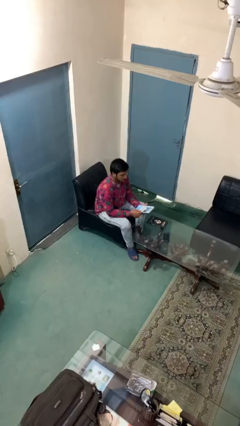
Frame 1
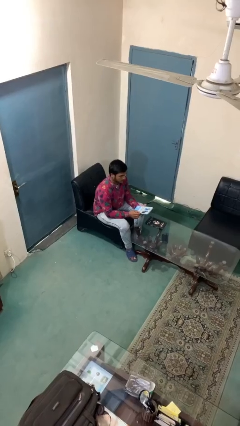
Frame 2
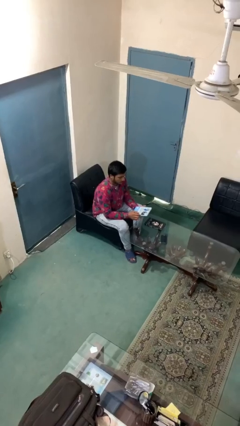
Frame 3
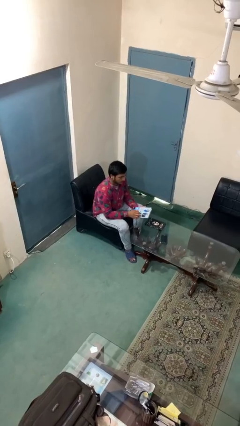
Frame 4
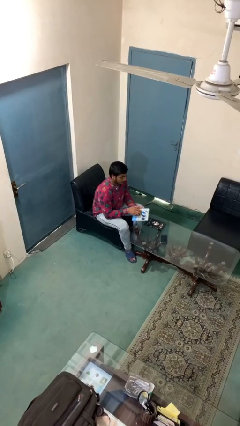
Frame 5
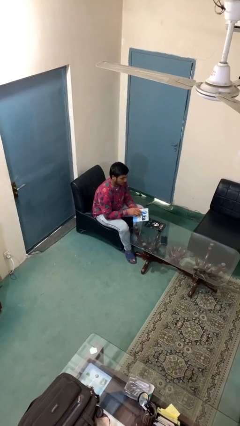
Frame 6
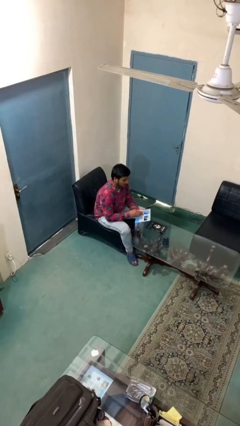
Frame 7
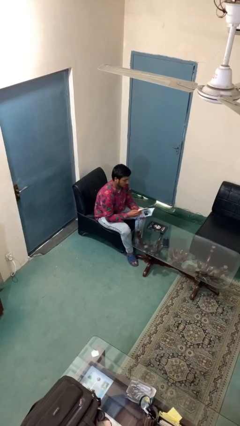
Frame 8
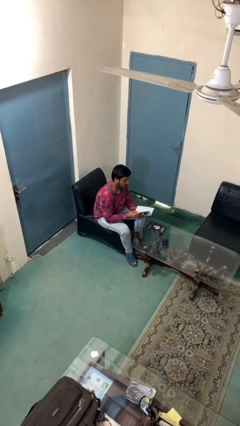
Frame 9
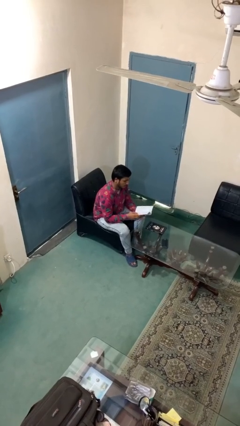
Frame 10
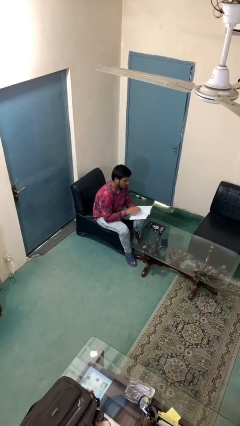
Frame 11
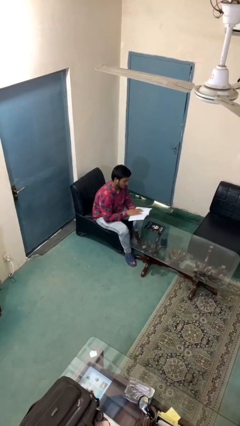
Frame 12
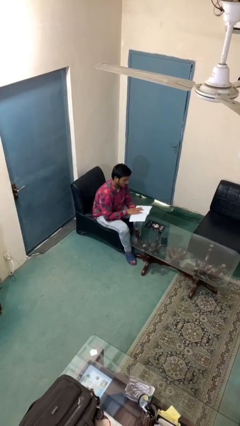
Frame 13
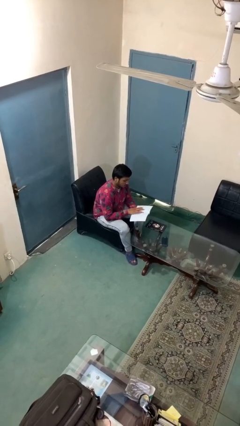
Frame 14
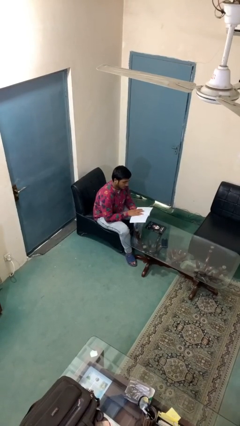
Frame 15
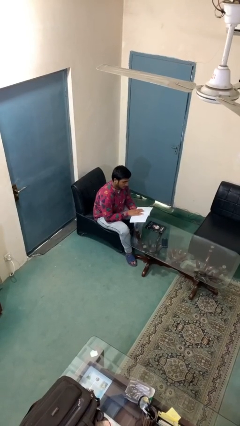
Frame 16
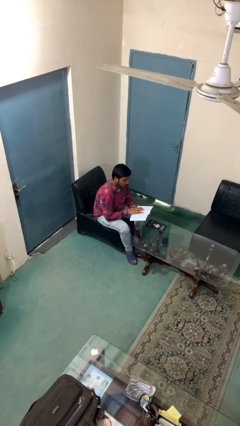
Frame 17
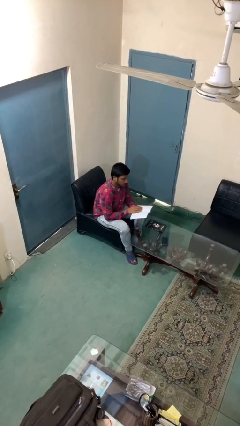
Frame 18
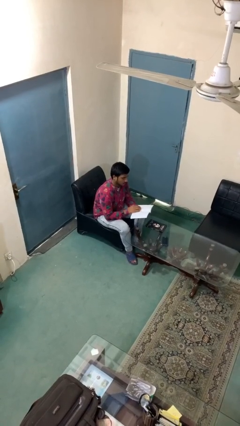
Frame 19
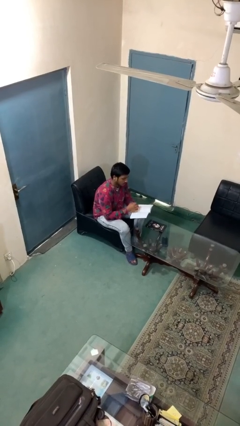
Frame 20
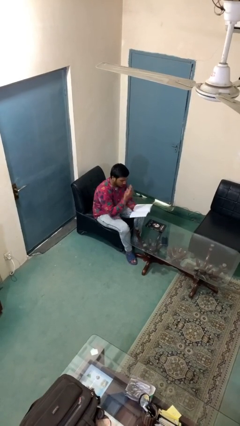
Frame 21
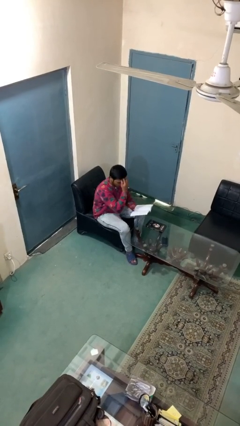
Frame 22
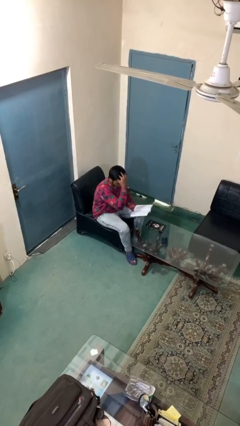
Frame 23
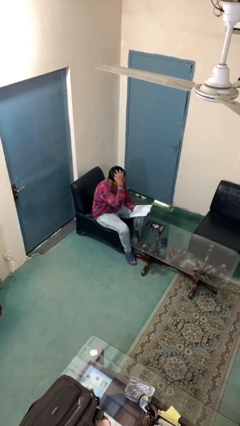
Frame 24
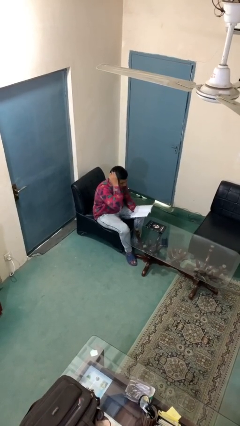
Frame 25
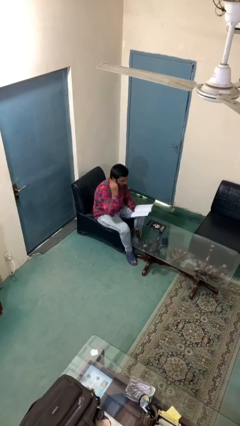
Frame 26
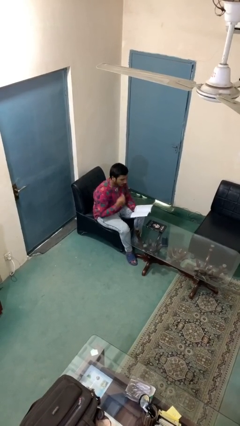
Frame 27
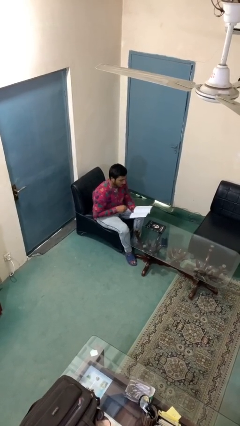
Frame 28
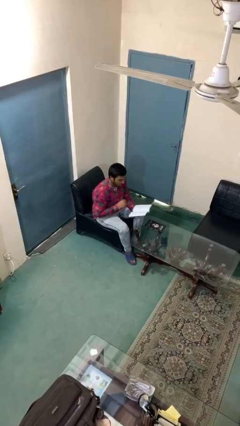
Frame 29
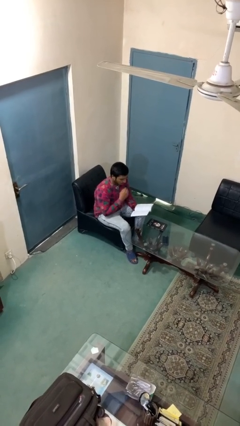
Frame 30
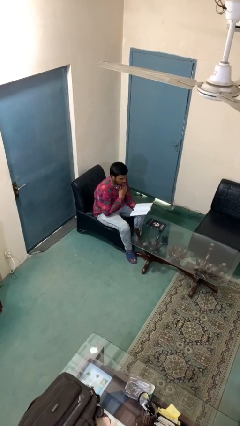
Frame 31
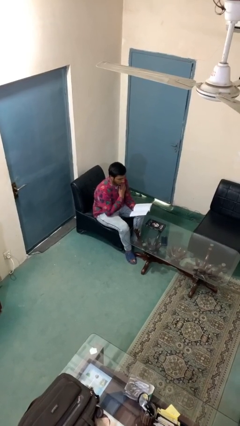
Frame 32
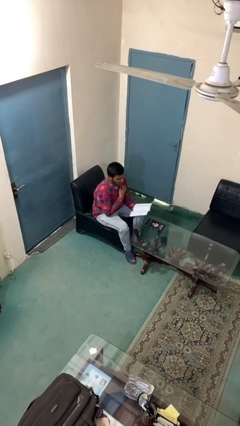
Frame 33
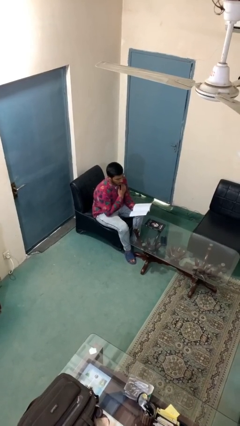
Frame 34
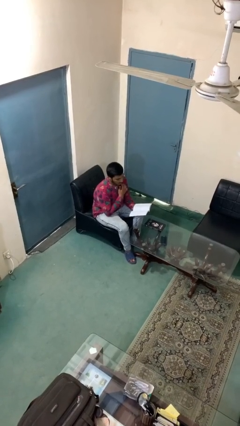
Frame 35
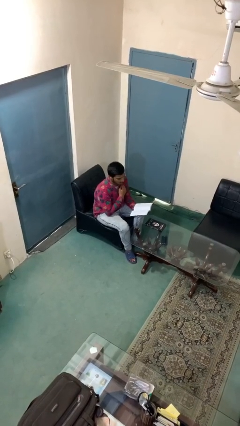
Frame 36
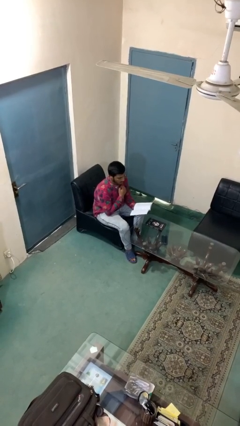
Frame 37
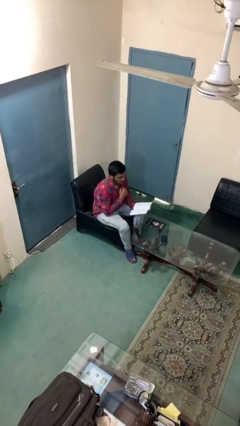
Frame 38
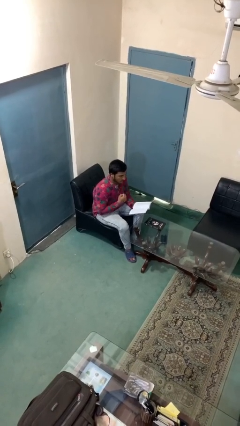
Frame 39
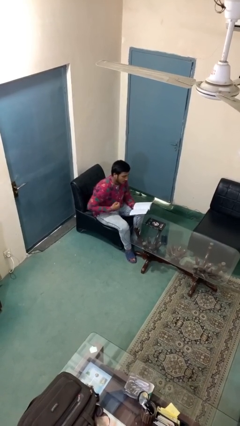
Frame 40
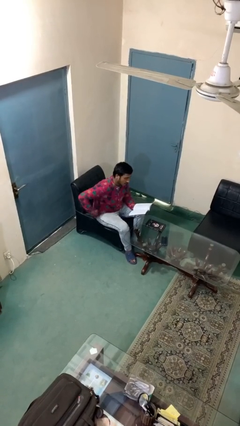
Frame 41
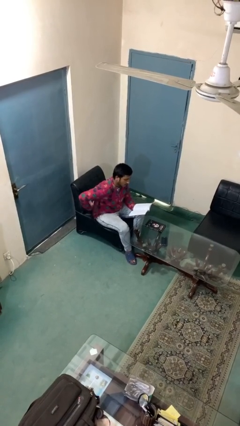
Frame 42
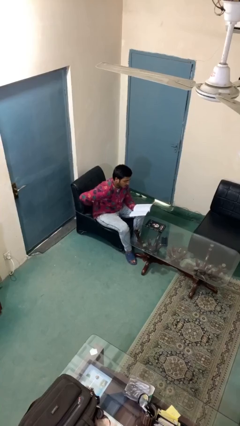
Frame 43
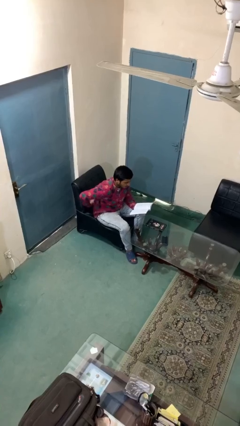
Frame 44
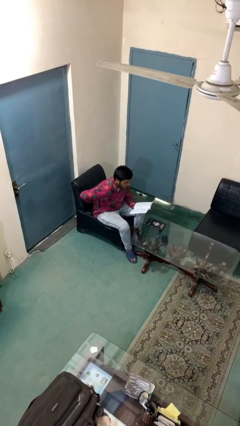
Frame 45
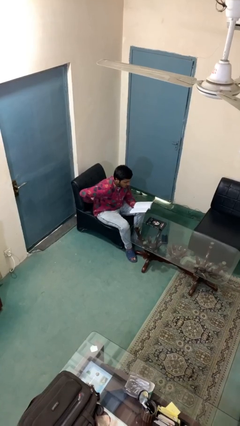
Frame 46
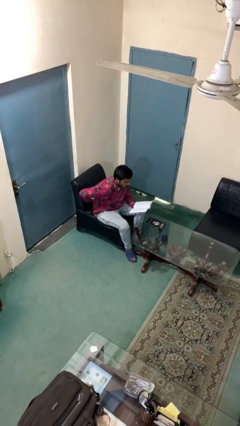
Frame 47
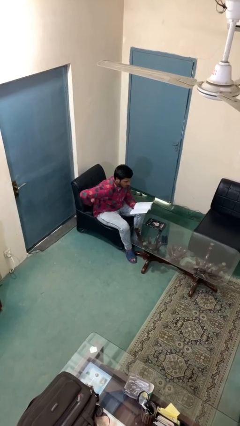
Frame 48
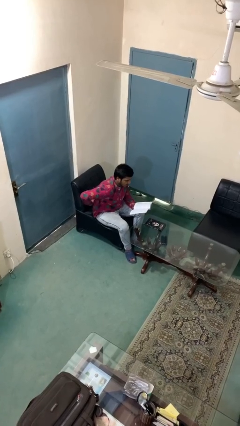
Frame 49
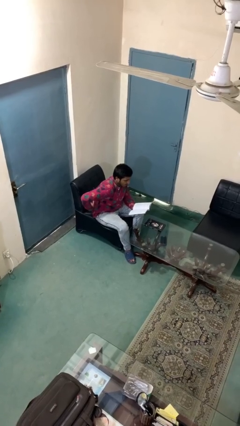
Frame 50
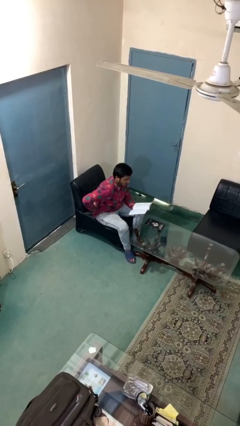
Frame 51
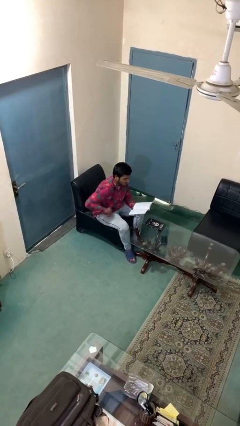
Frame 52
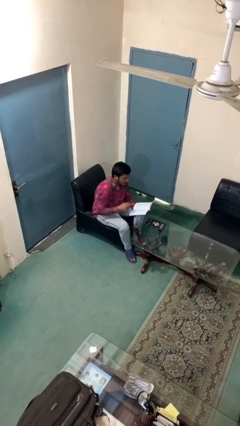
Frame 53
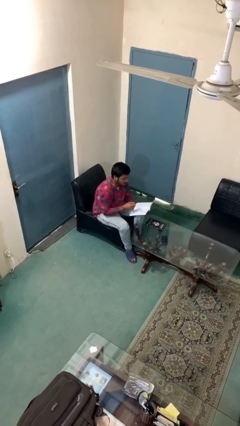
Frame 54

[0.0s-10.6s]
person reads document

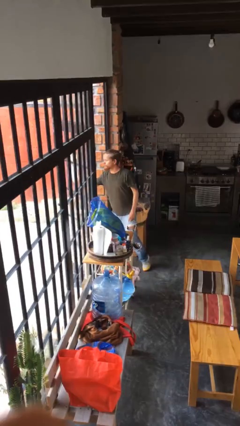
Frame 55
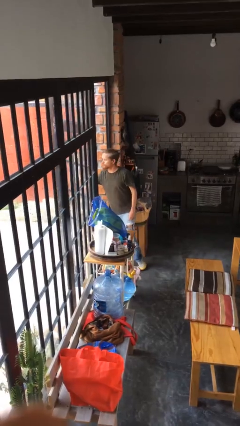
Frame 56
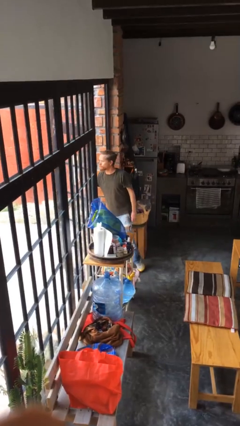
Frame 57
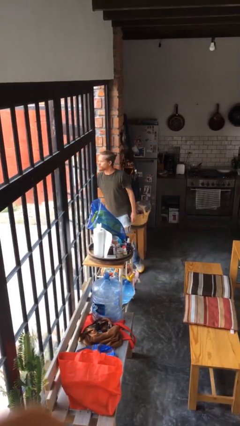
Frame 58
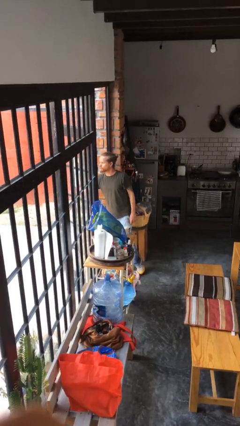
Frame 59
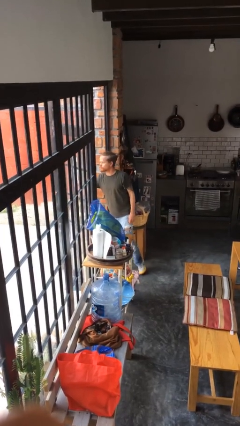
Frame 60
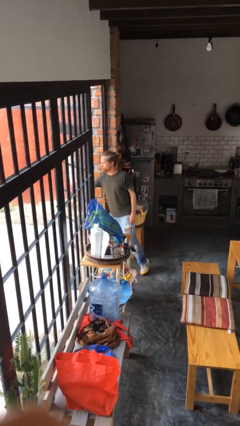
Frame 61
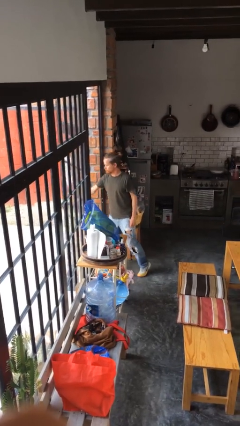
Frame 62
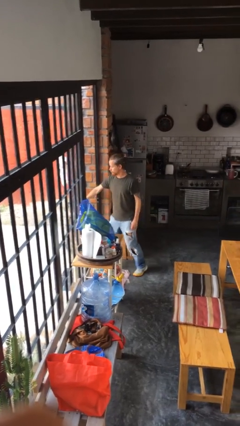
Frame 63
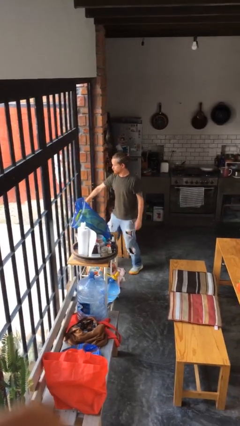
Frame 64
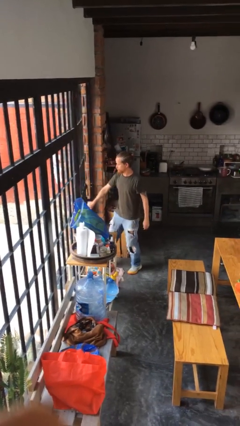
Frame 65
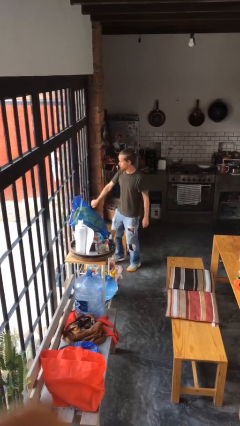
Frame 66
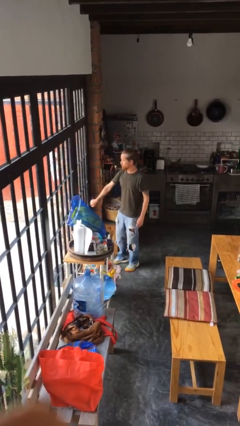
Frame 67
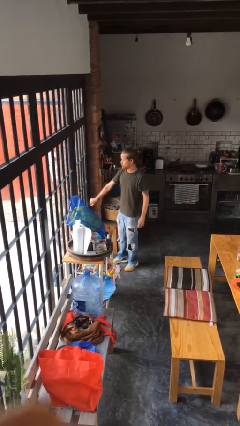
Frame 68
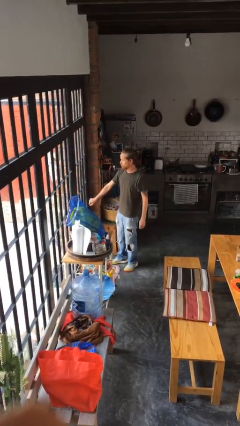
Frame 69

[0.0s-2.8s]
person closes facility door

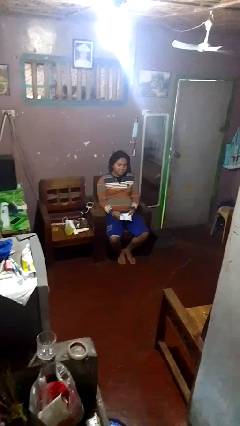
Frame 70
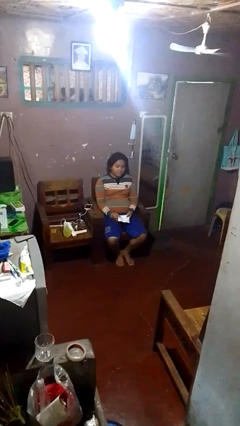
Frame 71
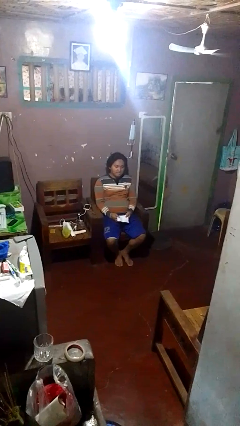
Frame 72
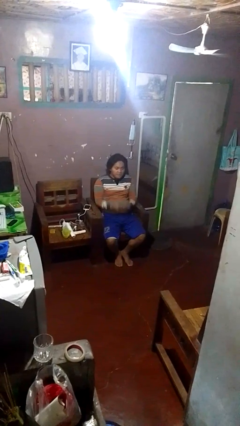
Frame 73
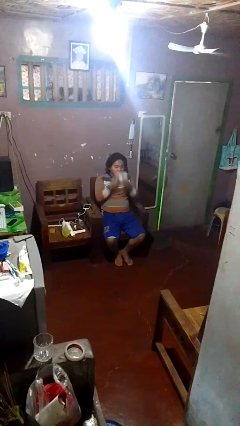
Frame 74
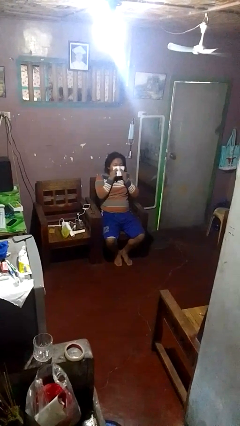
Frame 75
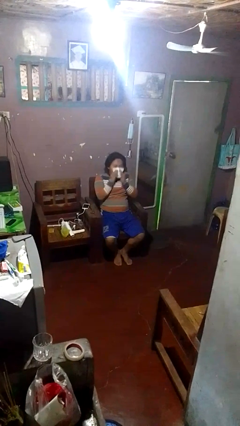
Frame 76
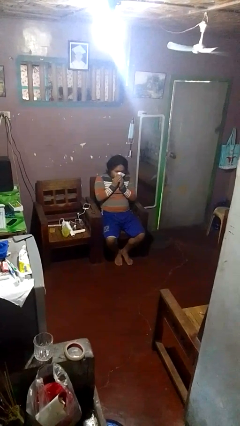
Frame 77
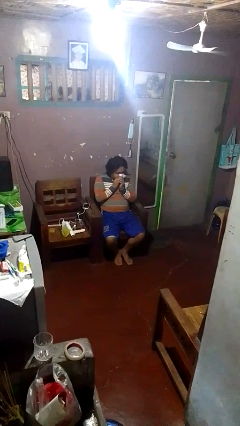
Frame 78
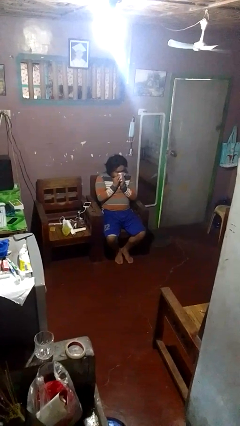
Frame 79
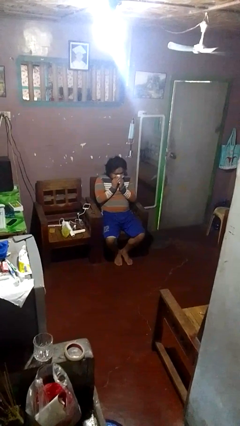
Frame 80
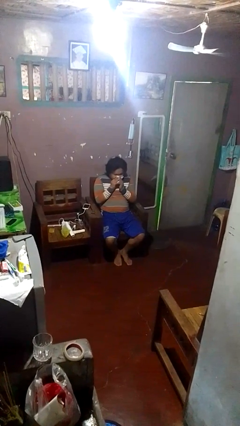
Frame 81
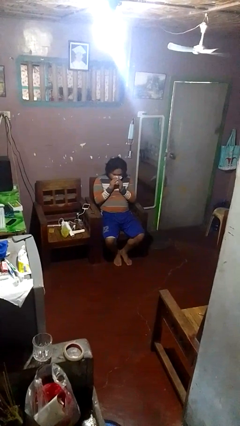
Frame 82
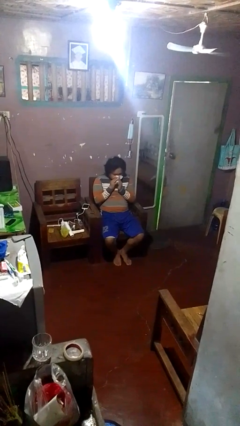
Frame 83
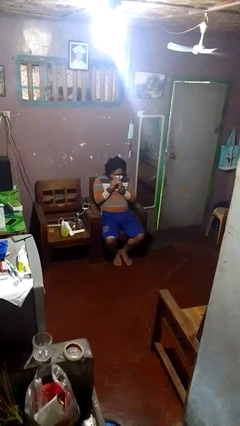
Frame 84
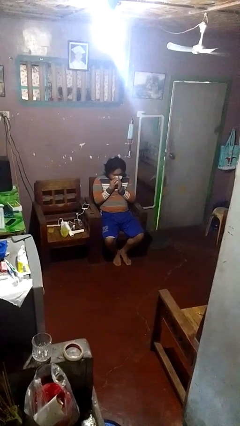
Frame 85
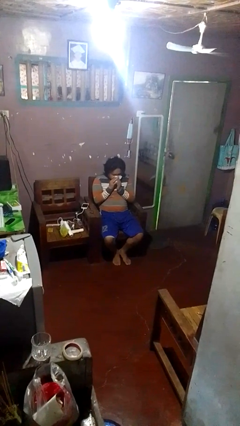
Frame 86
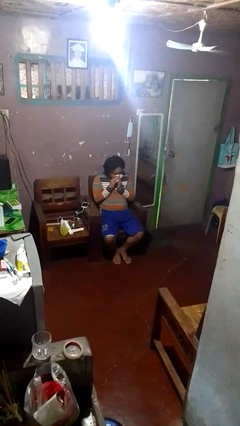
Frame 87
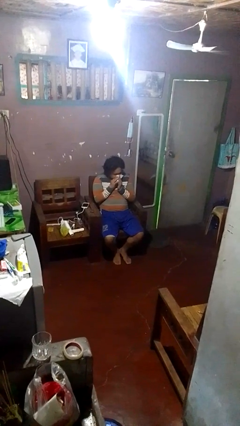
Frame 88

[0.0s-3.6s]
person blows nose

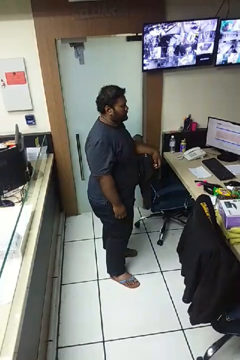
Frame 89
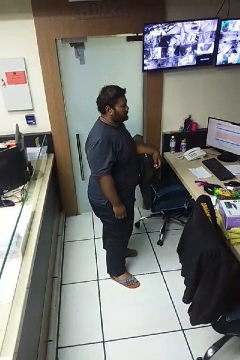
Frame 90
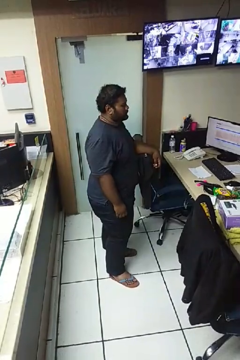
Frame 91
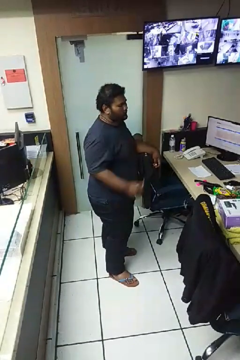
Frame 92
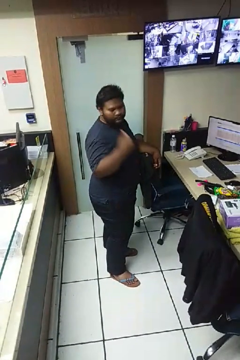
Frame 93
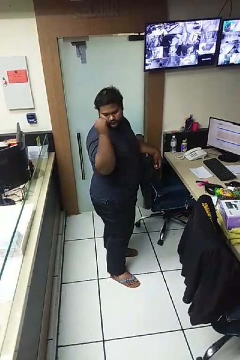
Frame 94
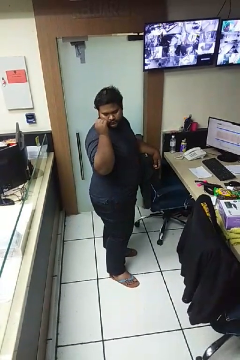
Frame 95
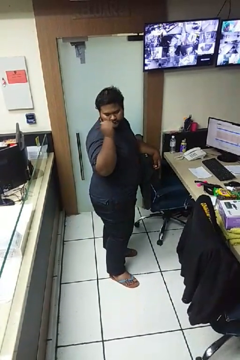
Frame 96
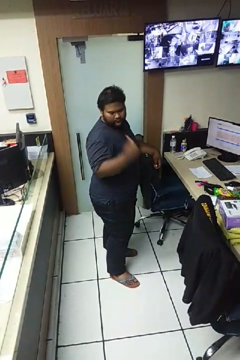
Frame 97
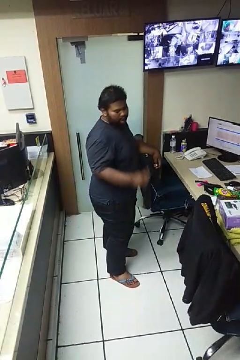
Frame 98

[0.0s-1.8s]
person gestures behind me
